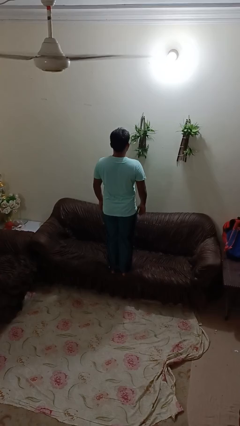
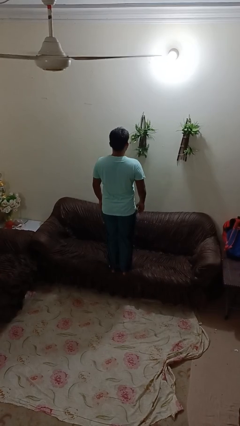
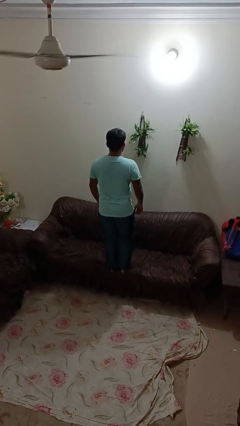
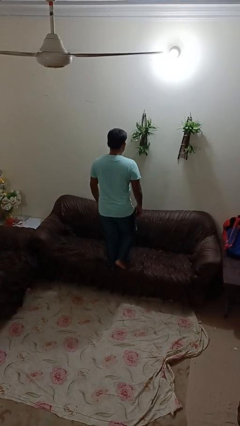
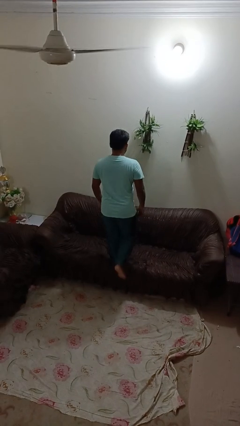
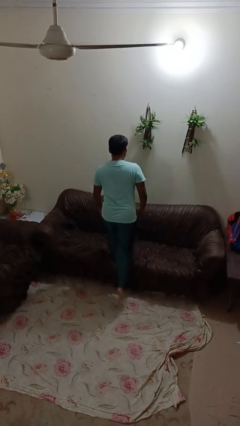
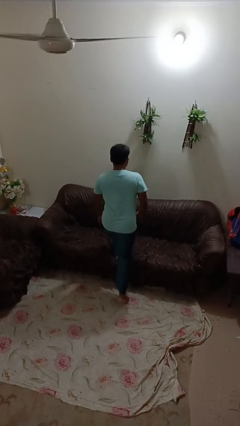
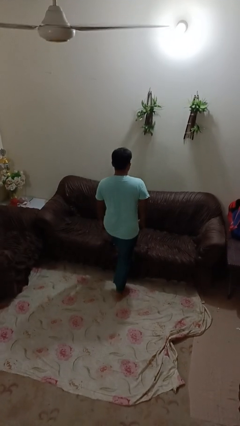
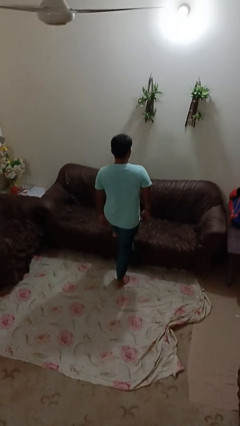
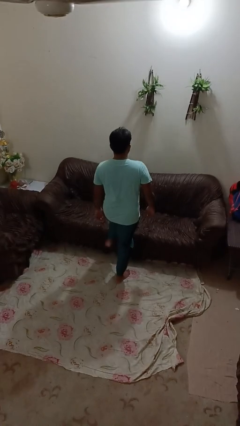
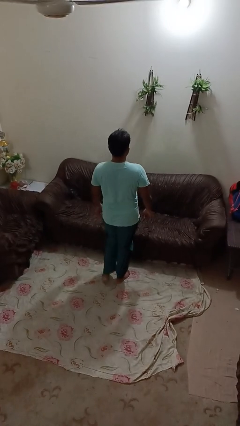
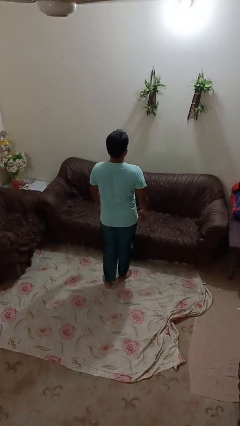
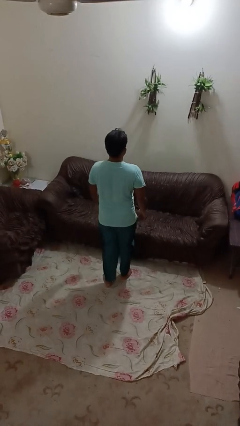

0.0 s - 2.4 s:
person climbs off couch

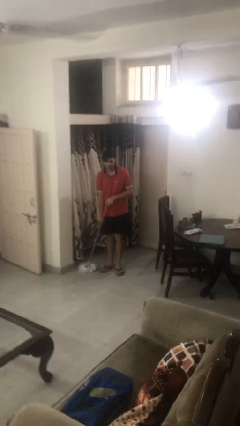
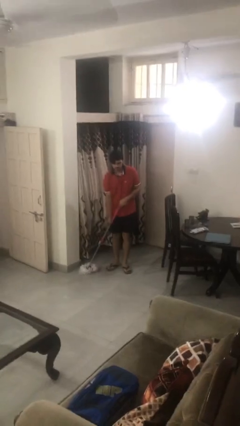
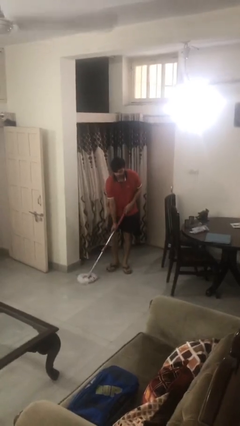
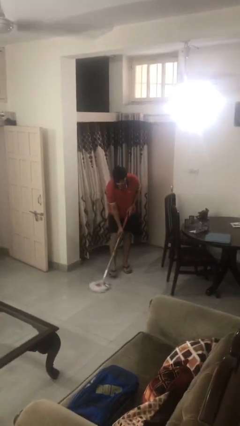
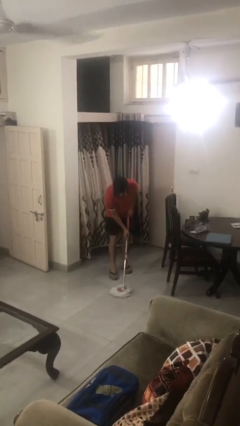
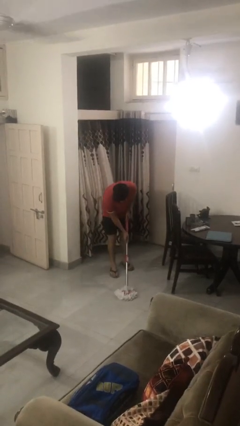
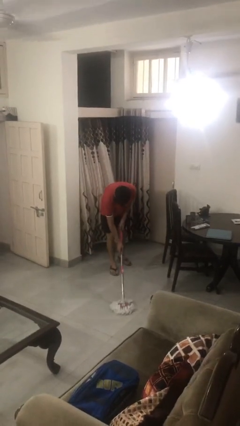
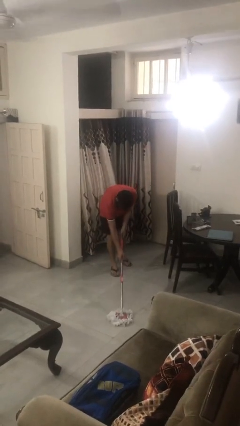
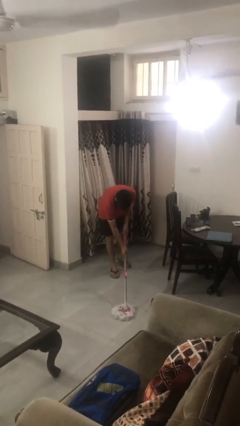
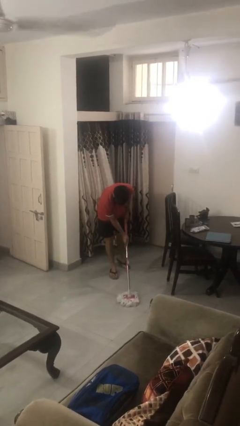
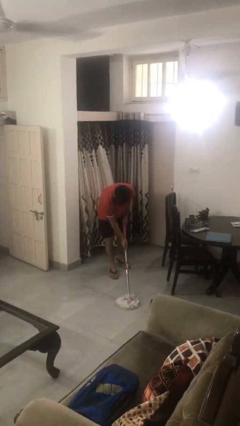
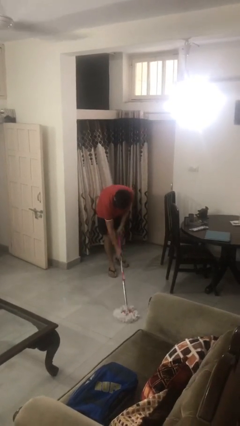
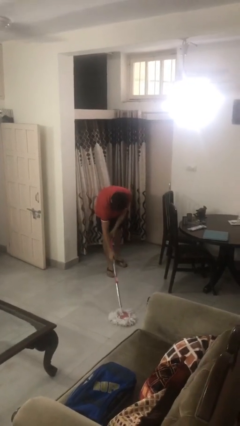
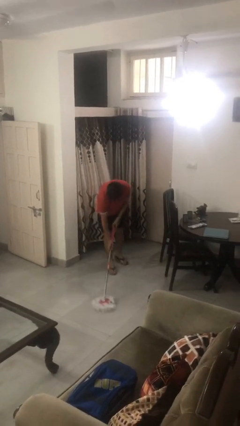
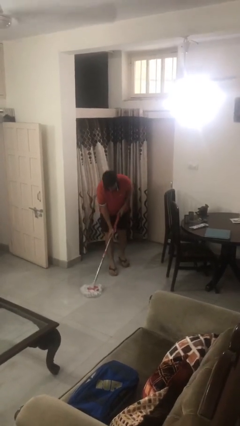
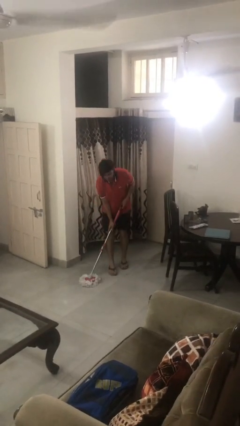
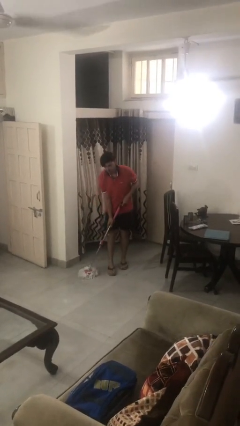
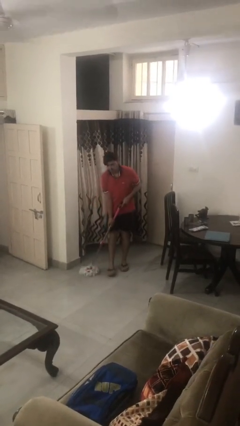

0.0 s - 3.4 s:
person mops

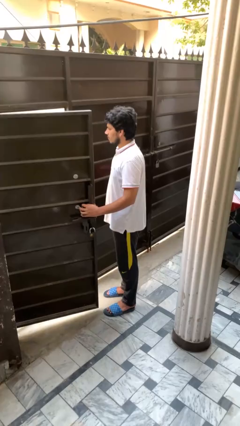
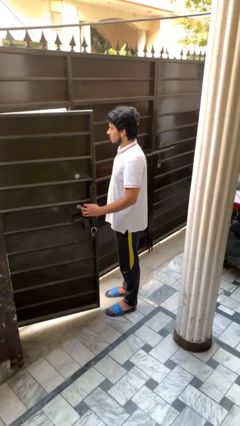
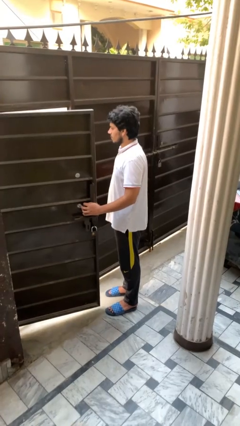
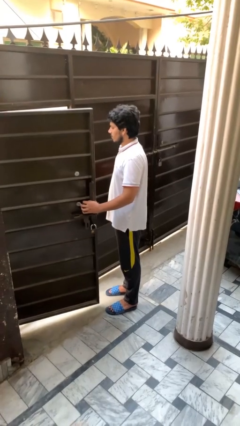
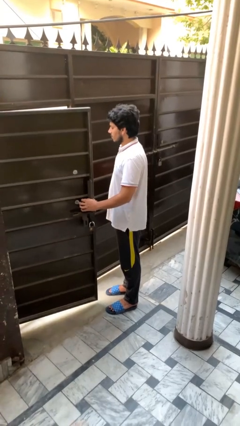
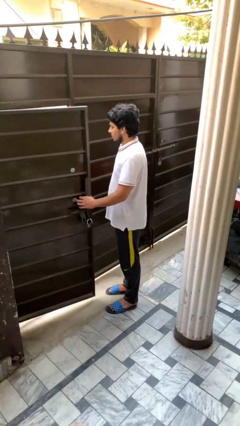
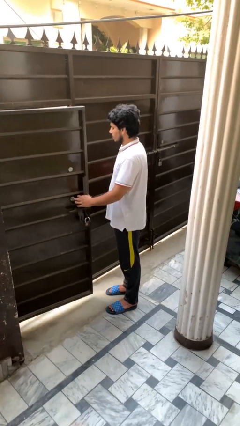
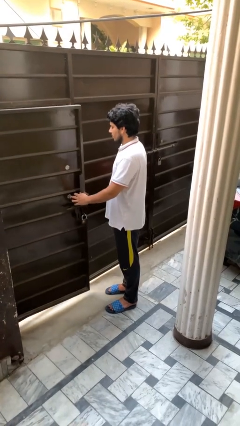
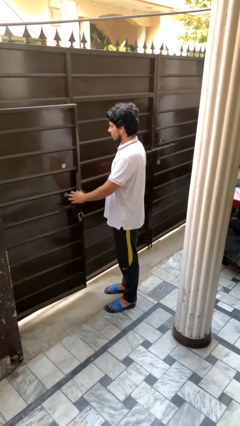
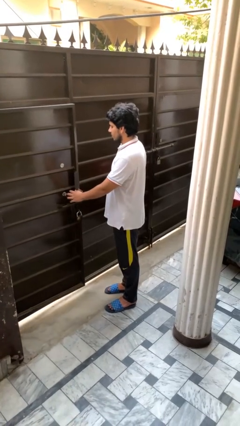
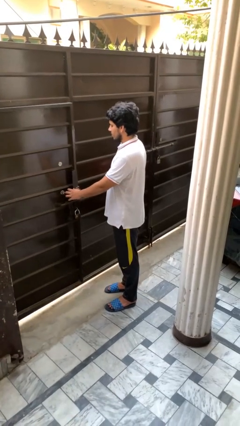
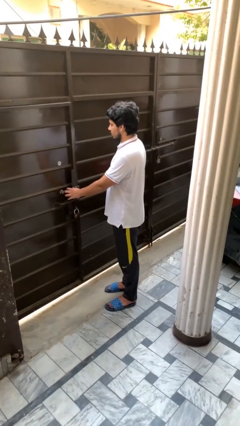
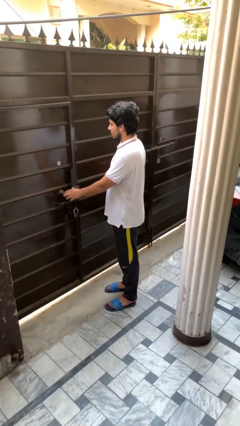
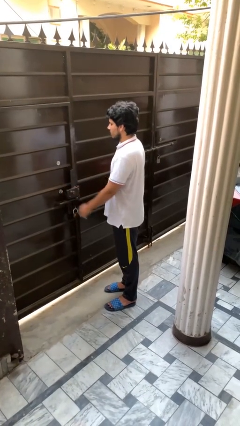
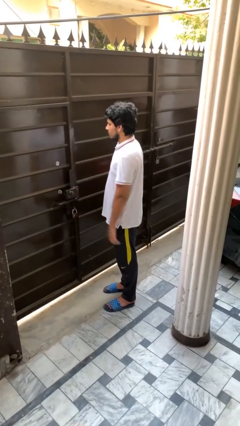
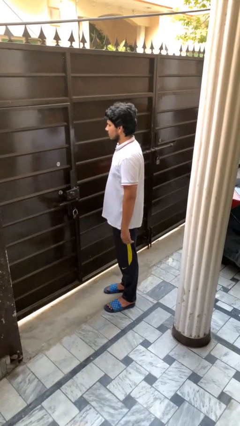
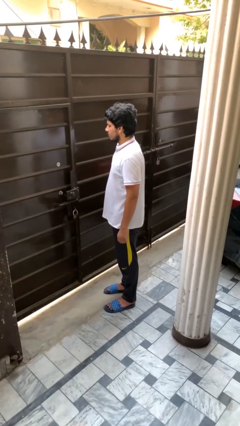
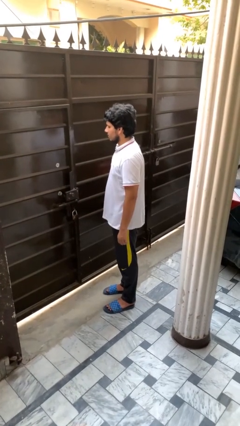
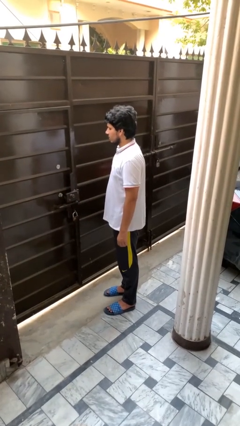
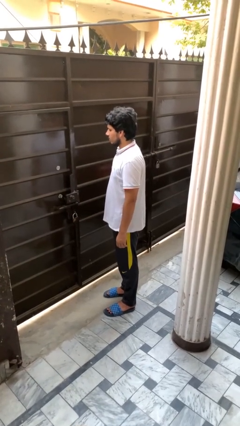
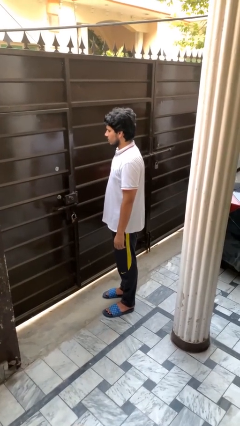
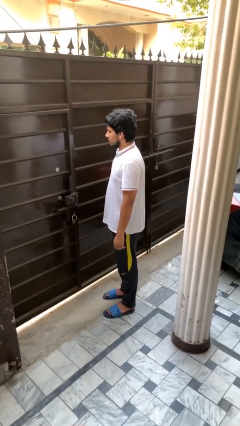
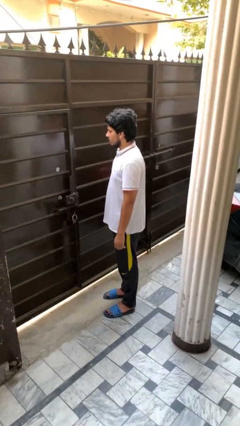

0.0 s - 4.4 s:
person closes gate

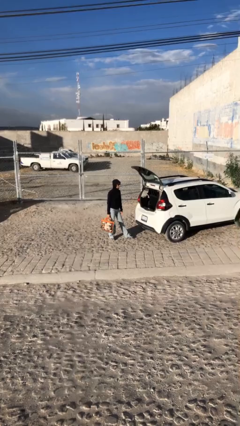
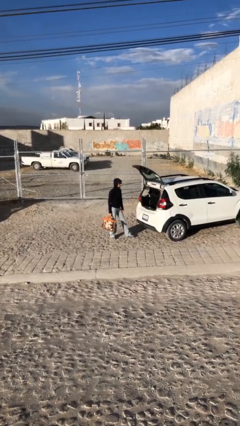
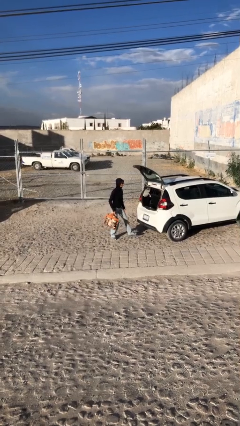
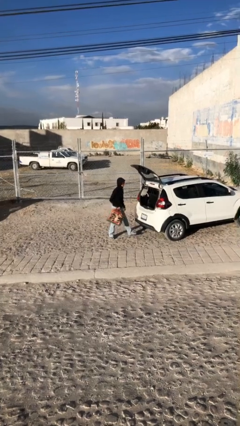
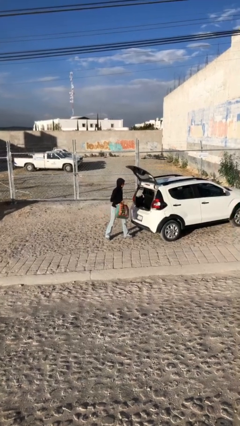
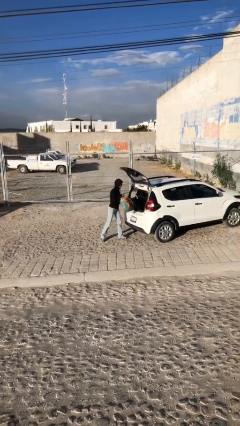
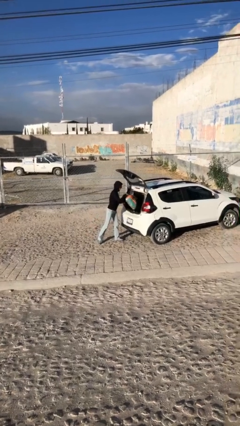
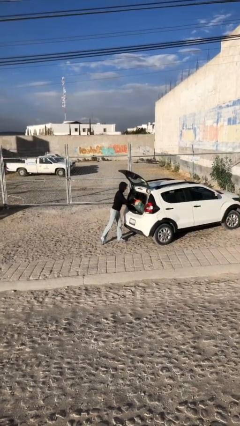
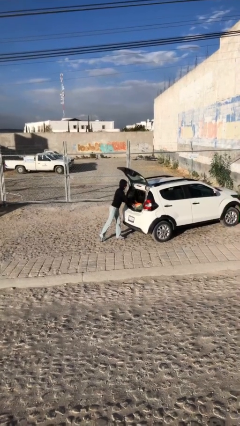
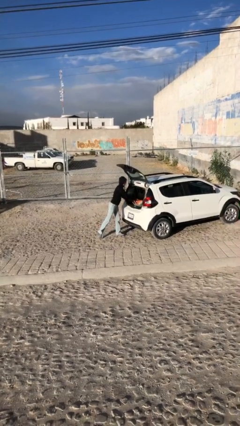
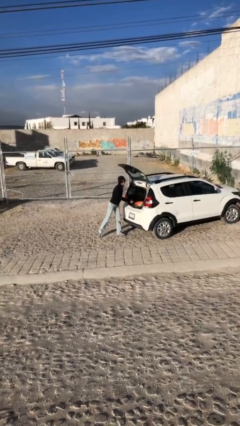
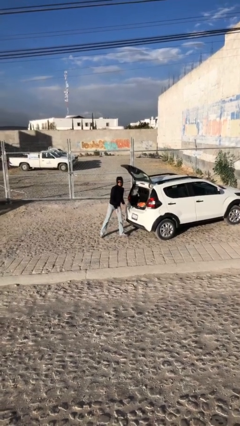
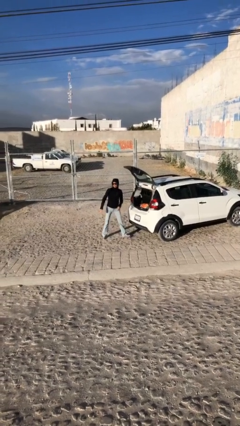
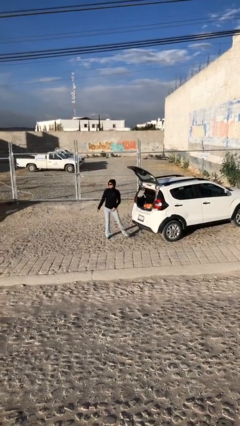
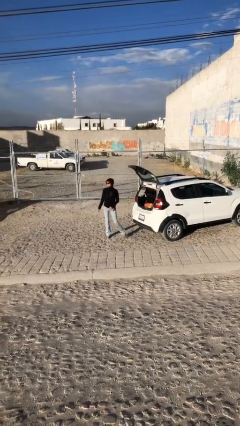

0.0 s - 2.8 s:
person loads car

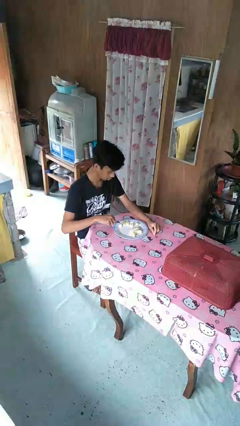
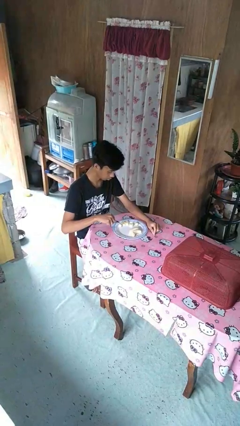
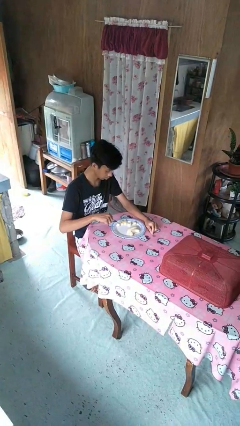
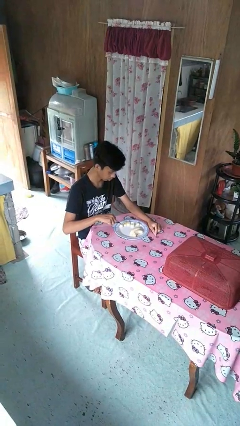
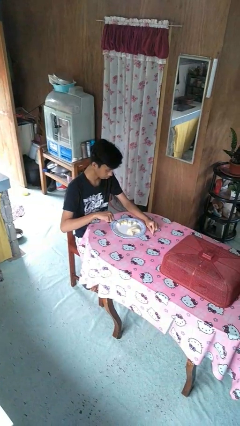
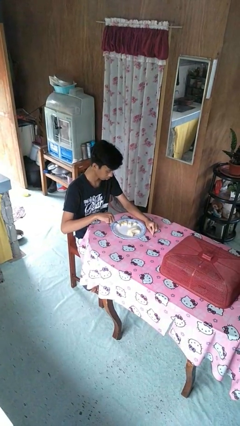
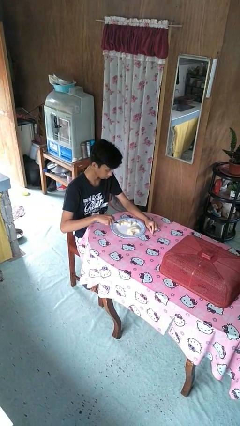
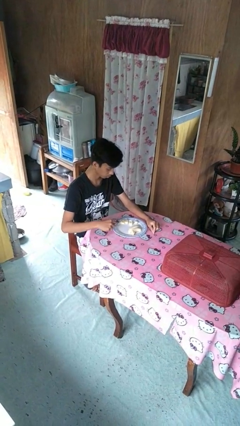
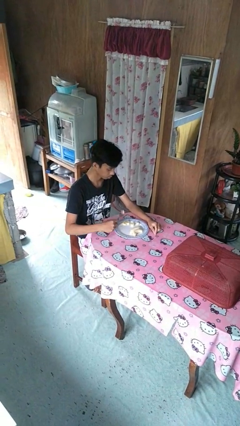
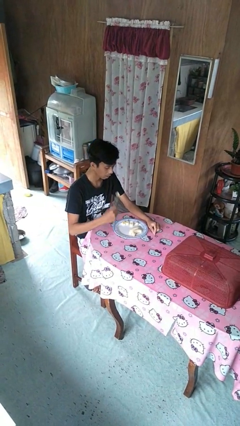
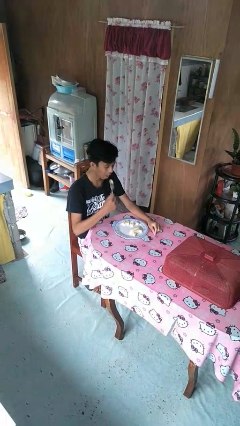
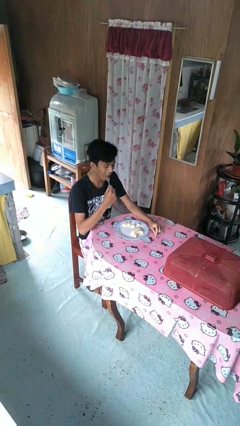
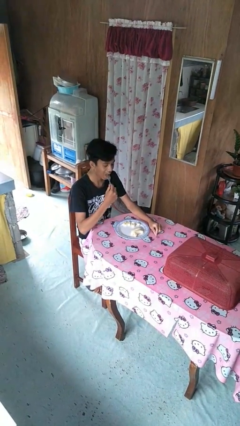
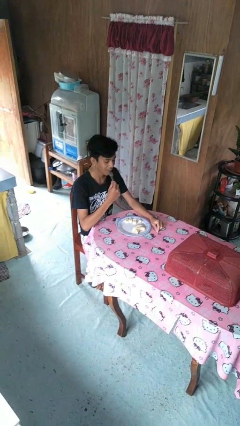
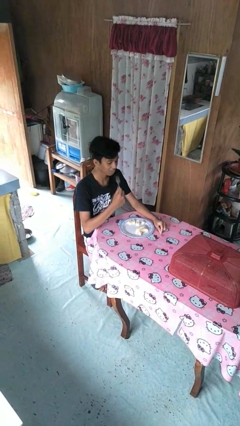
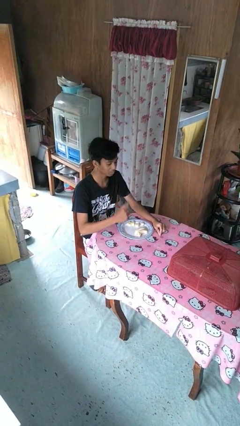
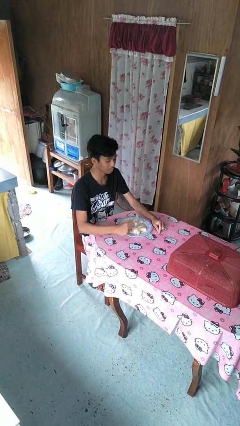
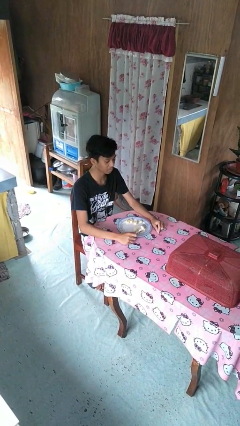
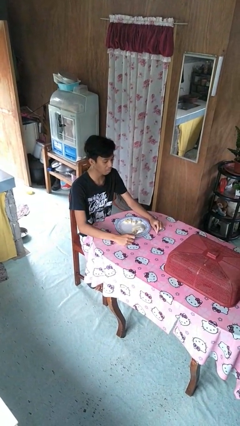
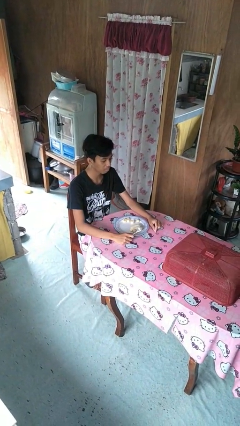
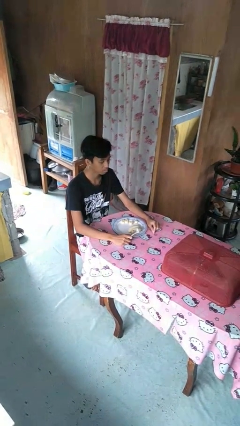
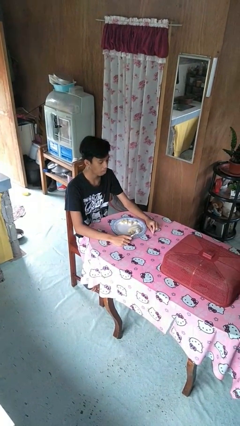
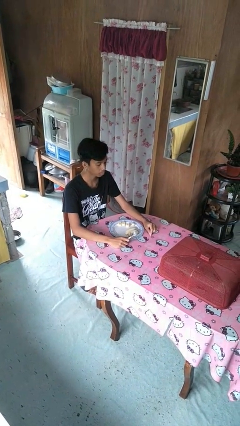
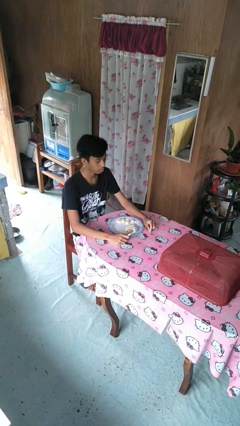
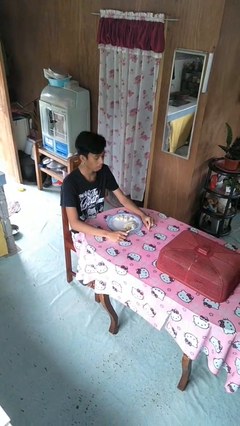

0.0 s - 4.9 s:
person eats with utensil
